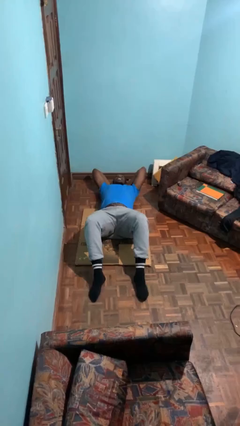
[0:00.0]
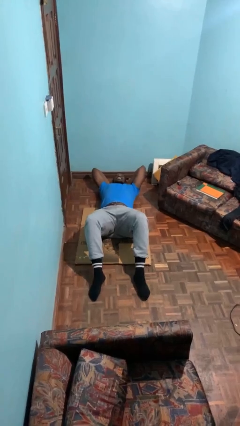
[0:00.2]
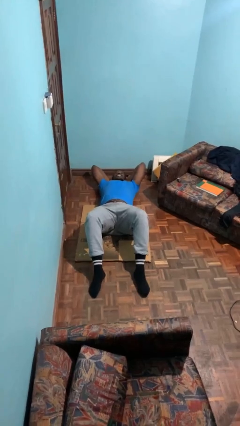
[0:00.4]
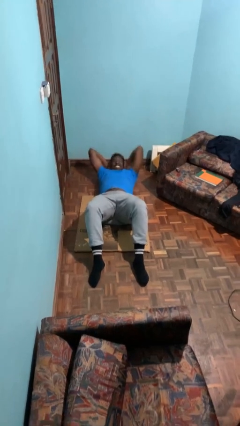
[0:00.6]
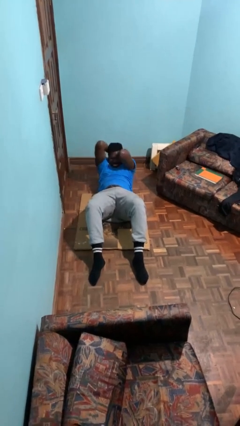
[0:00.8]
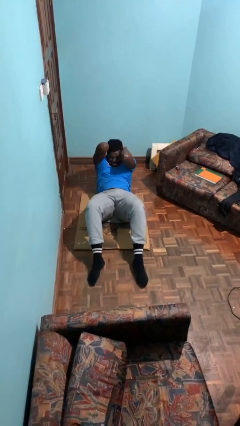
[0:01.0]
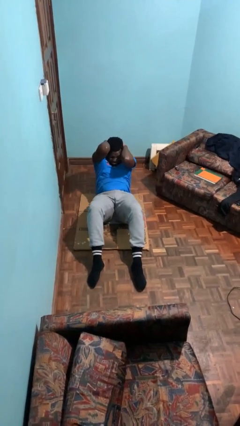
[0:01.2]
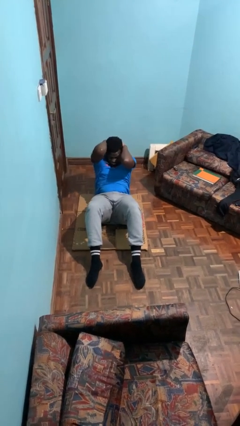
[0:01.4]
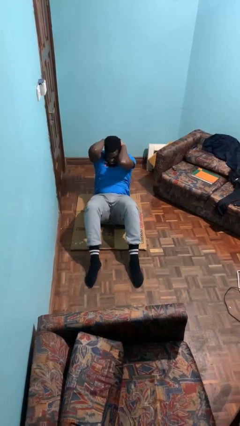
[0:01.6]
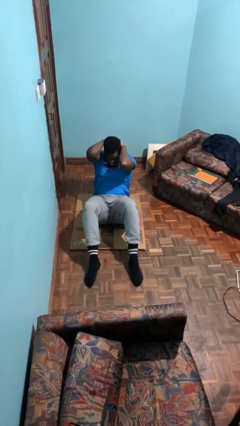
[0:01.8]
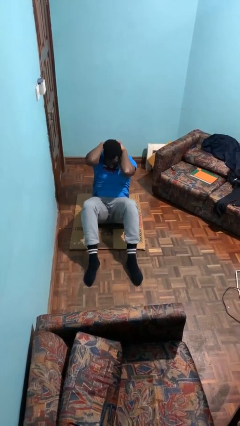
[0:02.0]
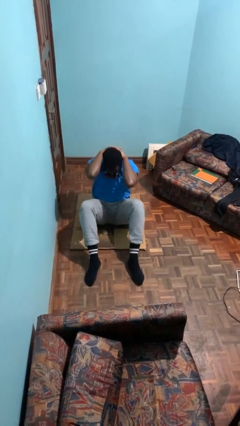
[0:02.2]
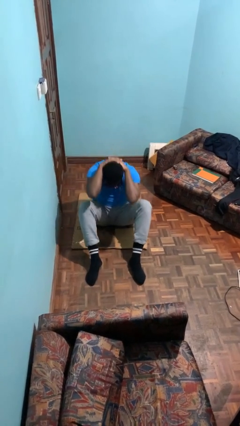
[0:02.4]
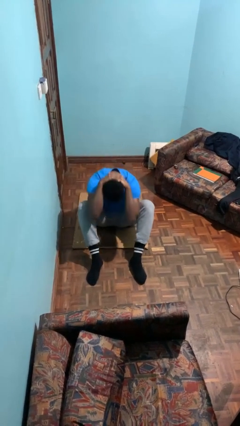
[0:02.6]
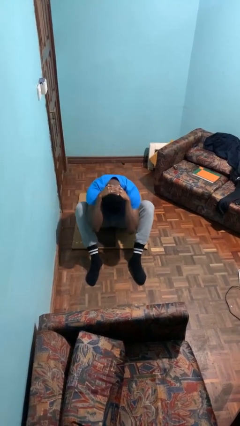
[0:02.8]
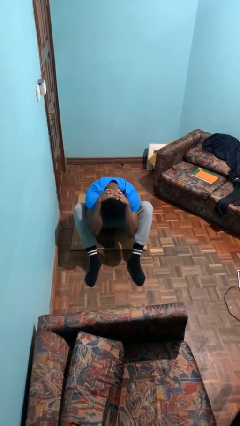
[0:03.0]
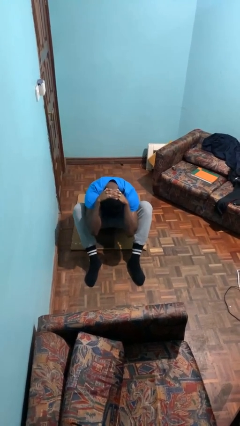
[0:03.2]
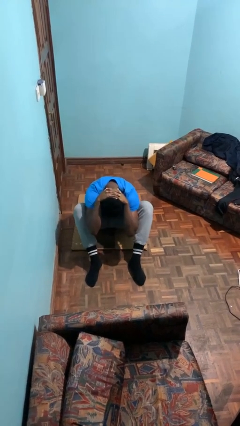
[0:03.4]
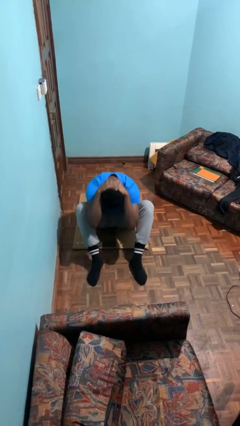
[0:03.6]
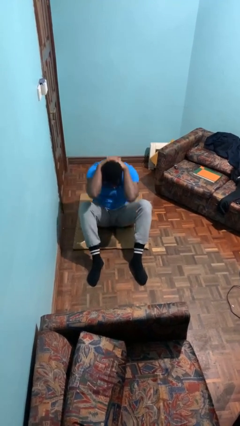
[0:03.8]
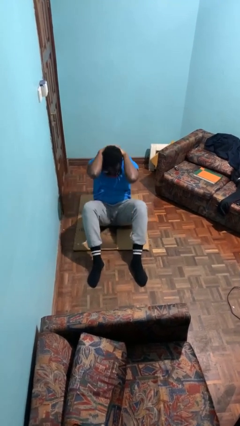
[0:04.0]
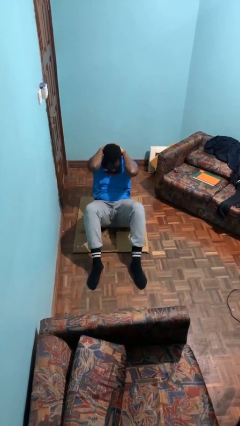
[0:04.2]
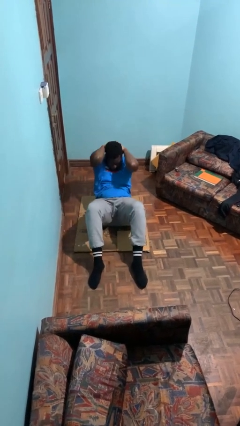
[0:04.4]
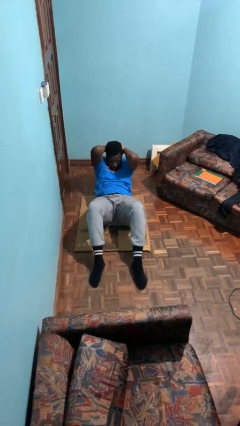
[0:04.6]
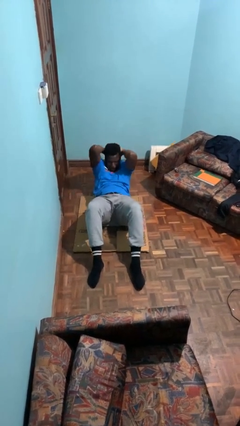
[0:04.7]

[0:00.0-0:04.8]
person exercises with situp

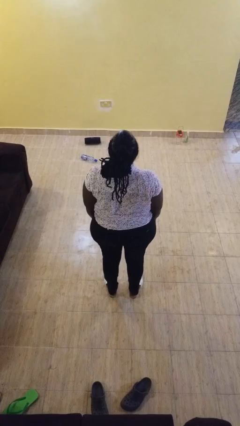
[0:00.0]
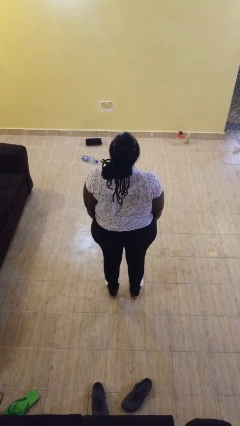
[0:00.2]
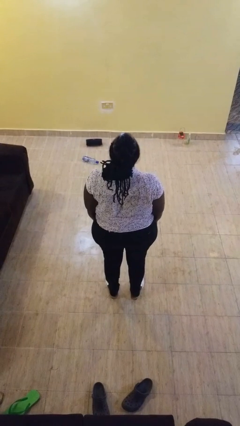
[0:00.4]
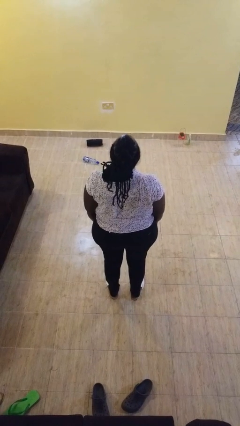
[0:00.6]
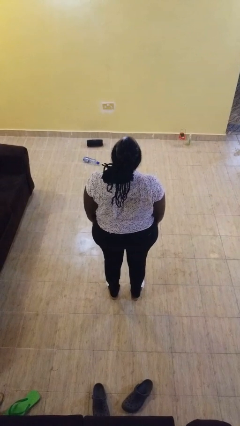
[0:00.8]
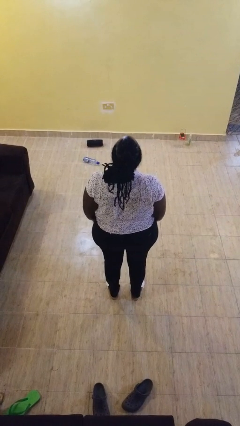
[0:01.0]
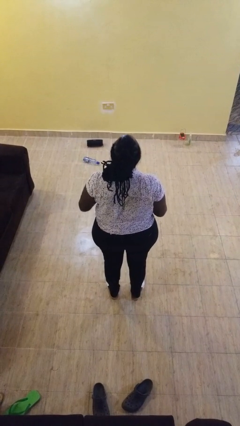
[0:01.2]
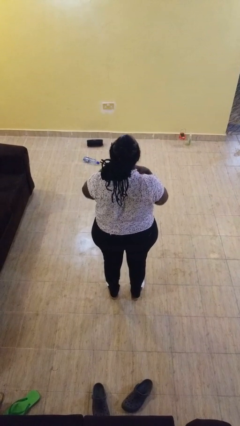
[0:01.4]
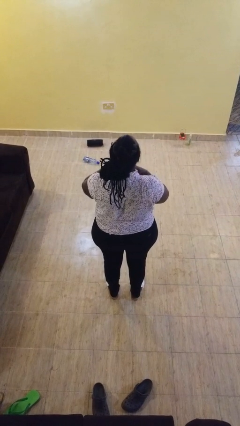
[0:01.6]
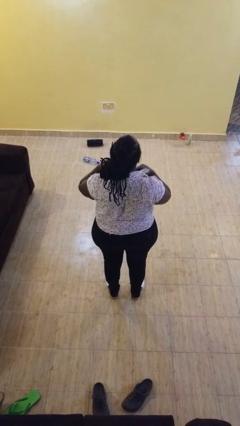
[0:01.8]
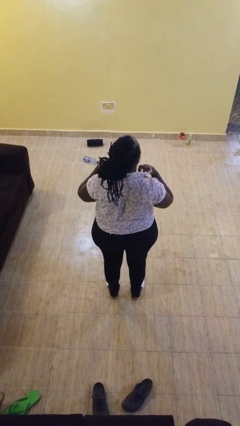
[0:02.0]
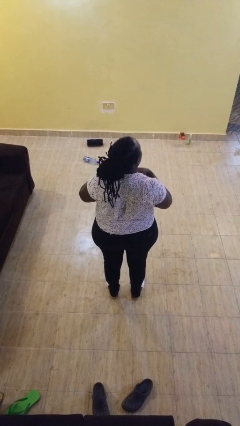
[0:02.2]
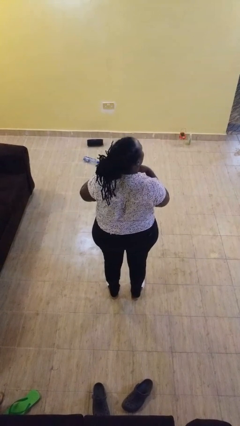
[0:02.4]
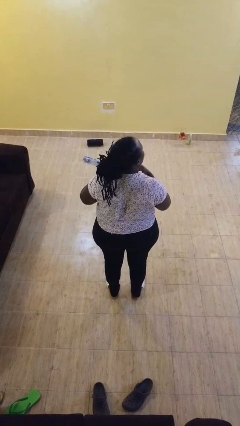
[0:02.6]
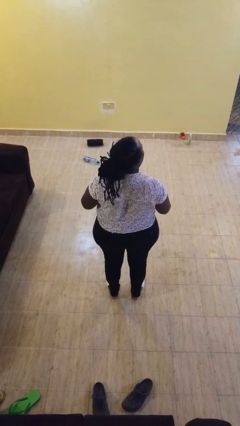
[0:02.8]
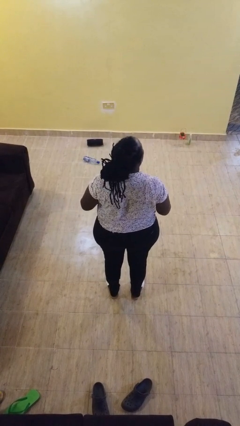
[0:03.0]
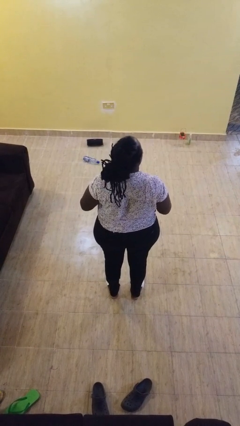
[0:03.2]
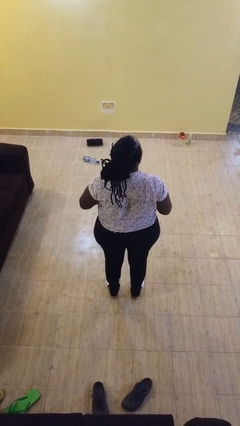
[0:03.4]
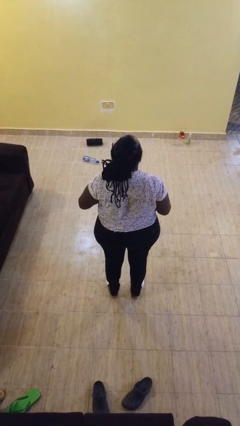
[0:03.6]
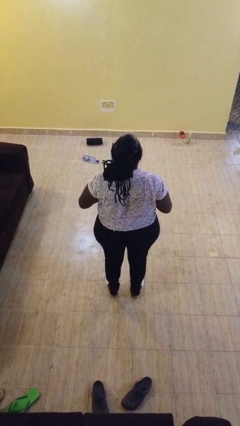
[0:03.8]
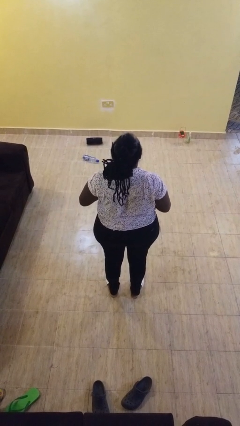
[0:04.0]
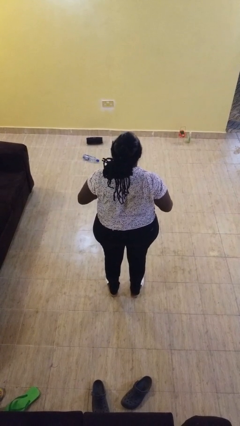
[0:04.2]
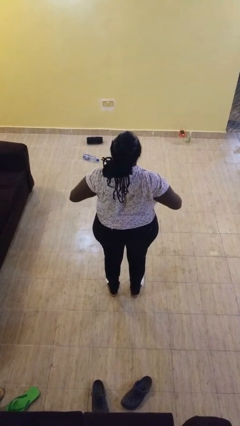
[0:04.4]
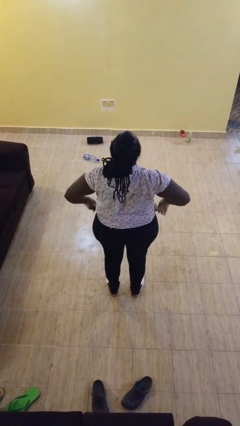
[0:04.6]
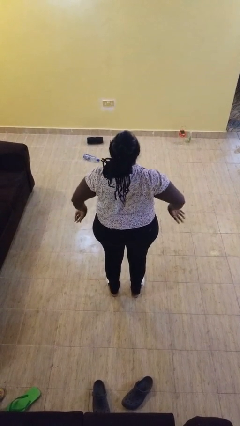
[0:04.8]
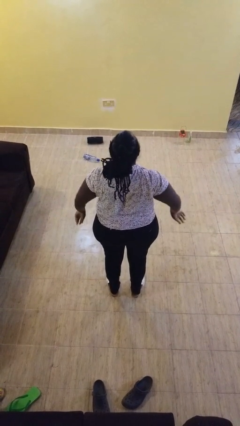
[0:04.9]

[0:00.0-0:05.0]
person unbuttons shirt

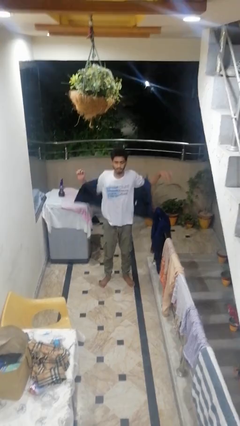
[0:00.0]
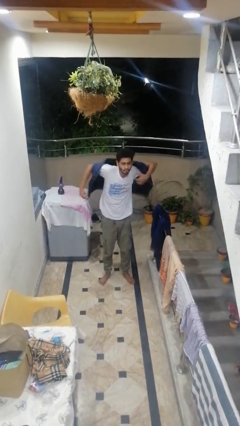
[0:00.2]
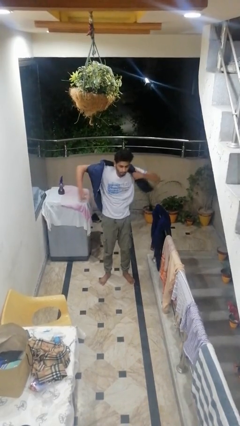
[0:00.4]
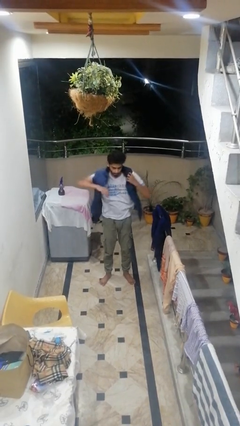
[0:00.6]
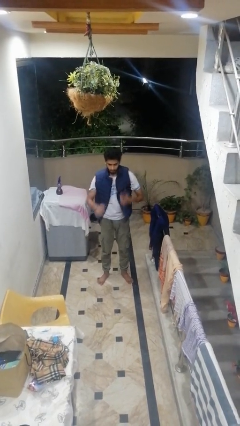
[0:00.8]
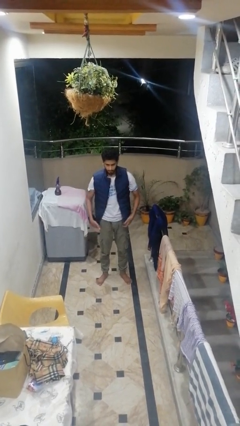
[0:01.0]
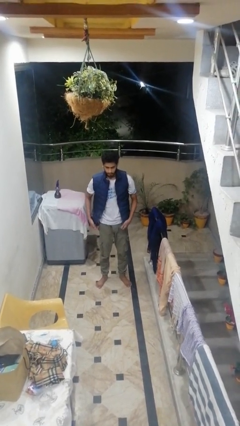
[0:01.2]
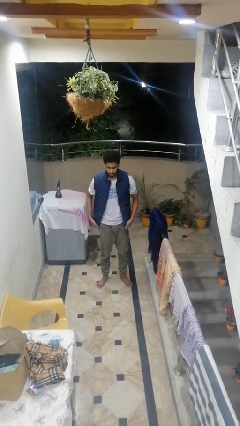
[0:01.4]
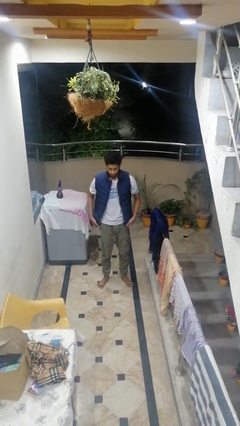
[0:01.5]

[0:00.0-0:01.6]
person puts on jacket

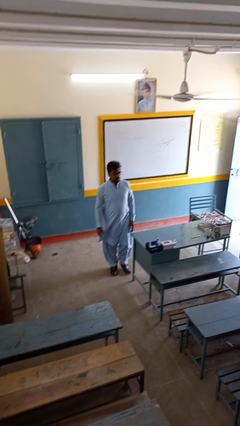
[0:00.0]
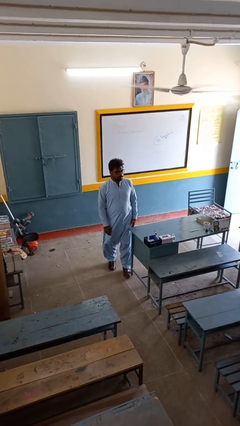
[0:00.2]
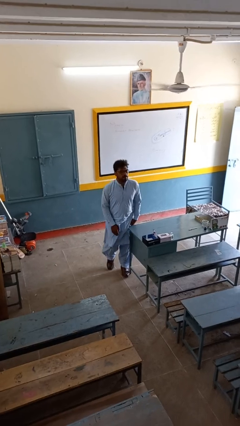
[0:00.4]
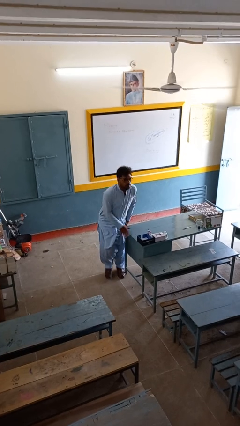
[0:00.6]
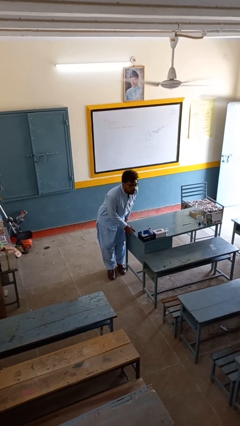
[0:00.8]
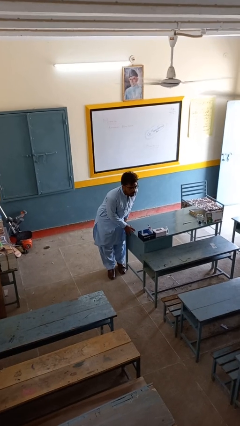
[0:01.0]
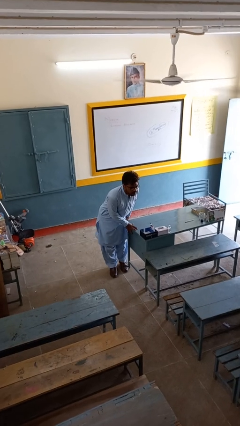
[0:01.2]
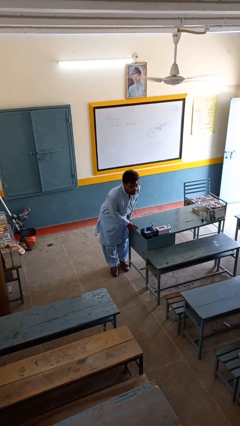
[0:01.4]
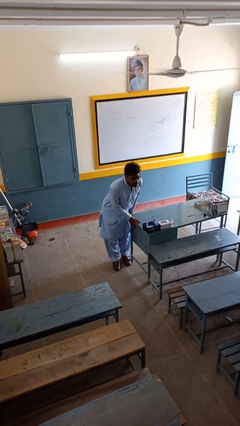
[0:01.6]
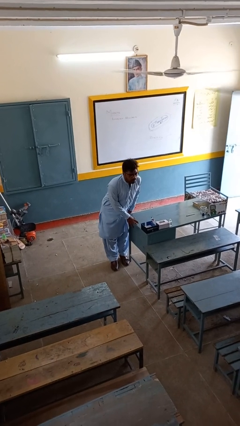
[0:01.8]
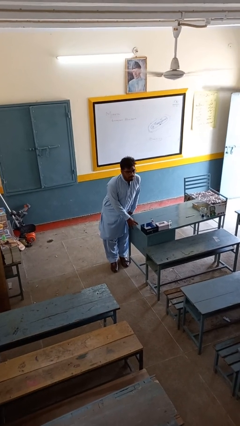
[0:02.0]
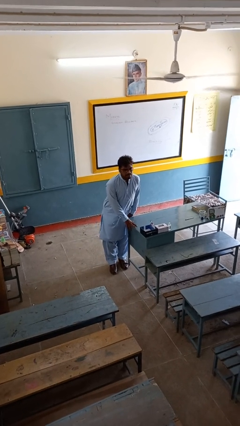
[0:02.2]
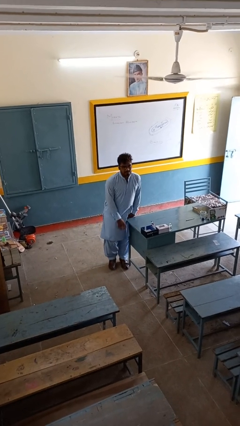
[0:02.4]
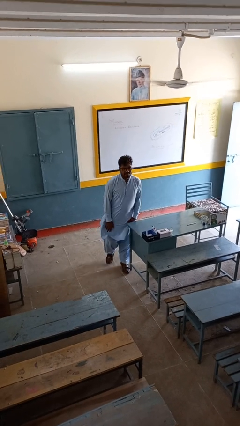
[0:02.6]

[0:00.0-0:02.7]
person bumps into table

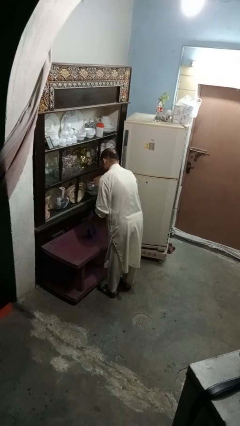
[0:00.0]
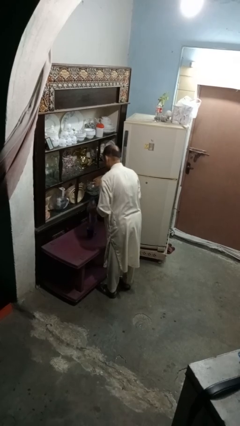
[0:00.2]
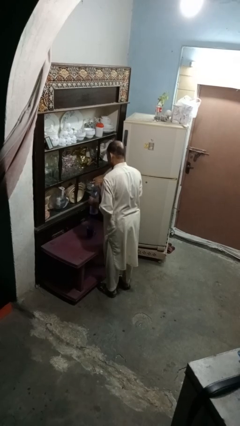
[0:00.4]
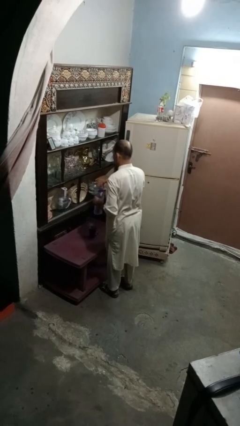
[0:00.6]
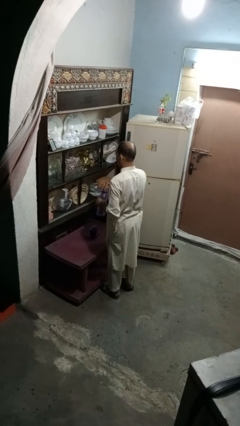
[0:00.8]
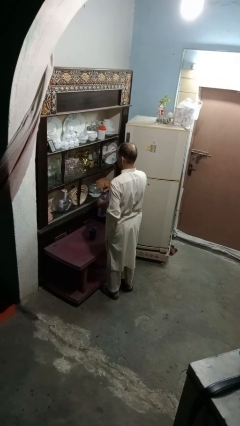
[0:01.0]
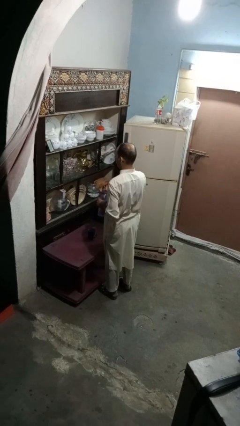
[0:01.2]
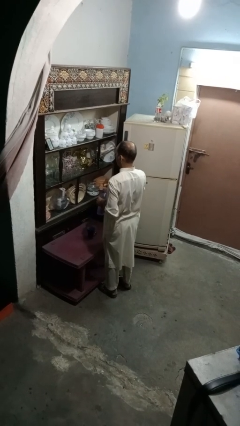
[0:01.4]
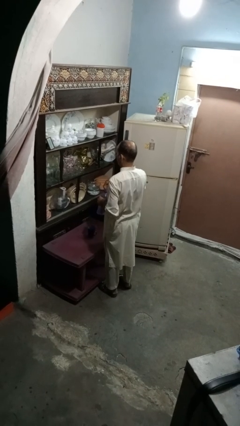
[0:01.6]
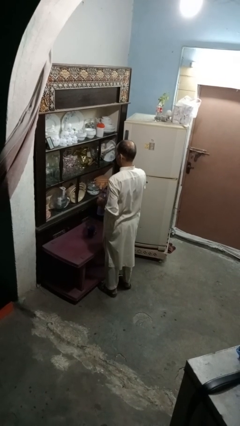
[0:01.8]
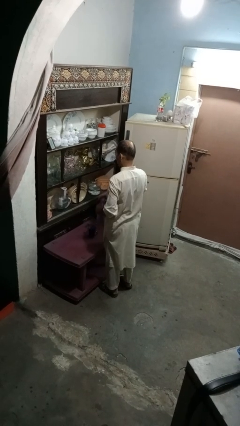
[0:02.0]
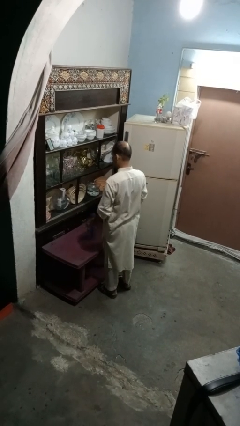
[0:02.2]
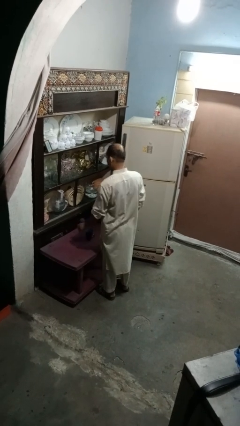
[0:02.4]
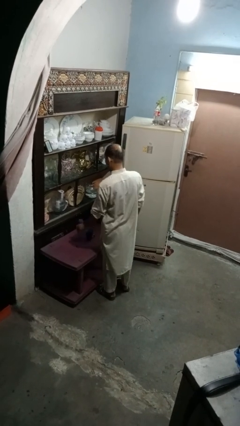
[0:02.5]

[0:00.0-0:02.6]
person screws lid to bottle

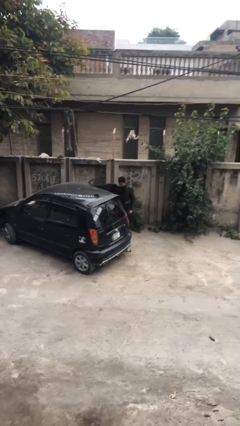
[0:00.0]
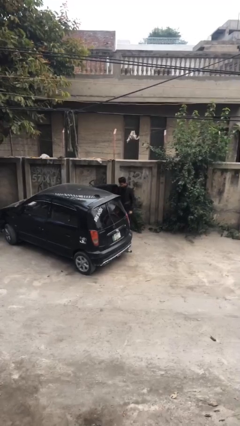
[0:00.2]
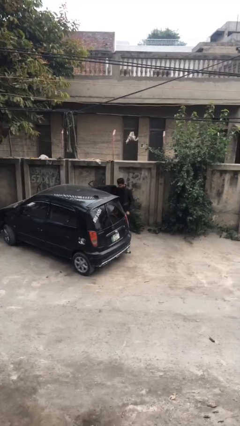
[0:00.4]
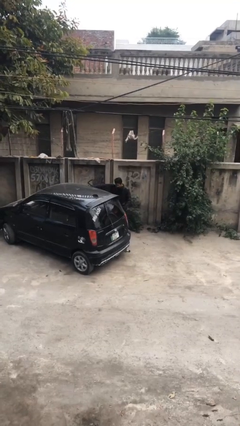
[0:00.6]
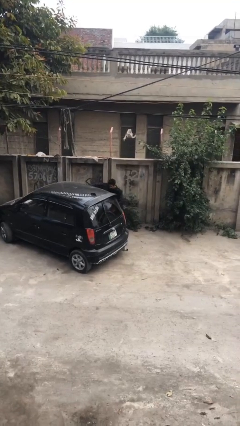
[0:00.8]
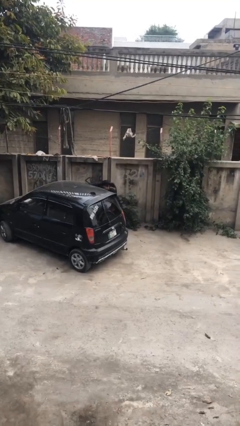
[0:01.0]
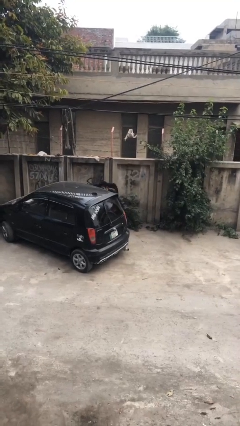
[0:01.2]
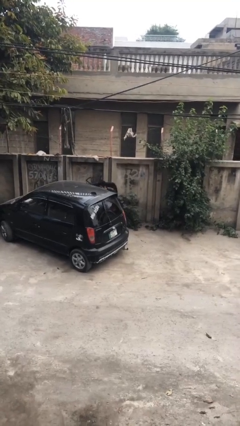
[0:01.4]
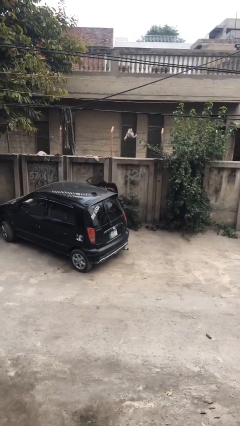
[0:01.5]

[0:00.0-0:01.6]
person unloads car
